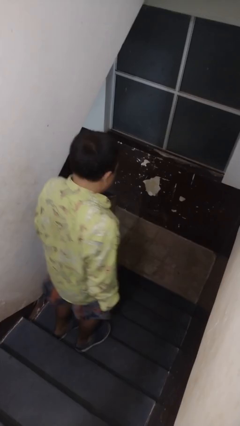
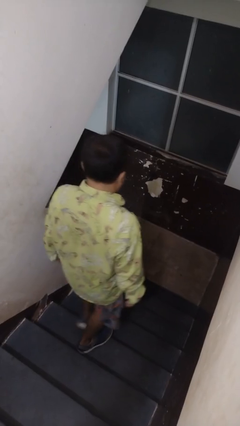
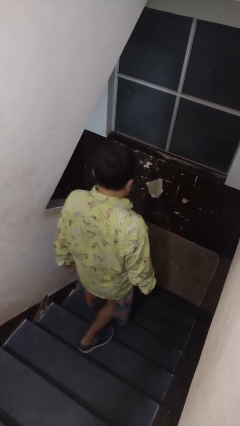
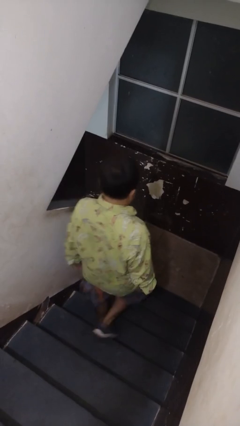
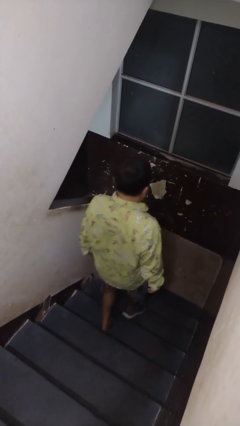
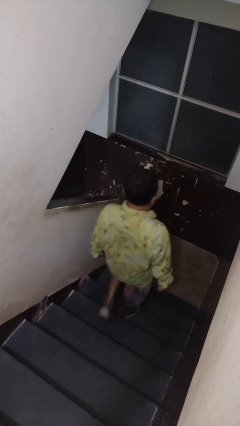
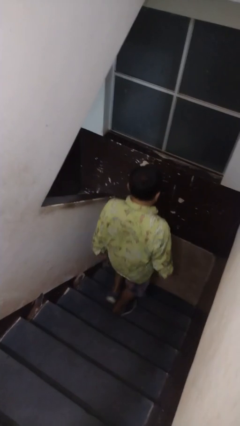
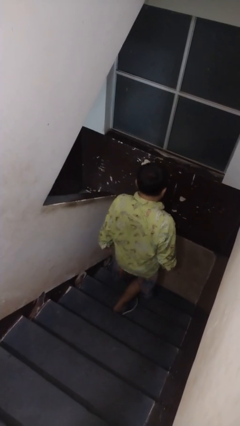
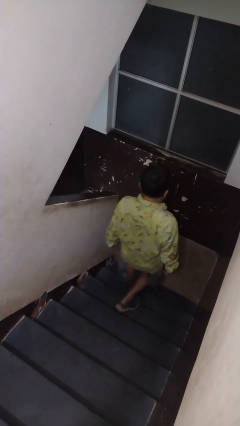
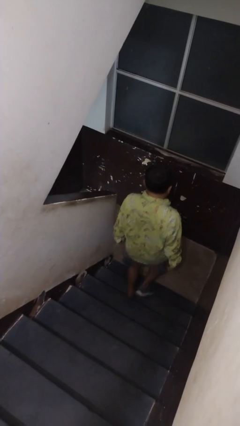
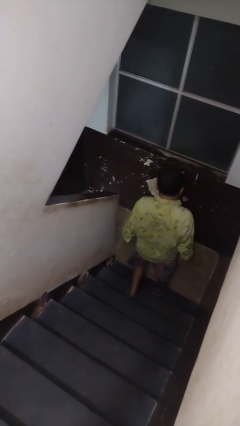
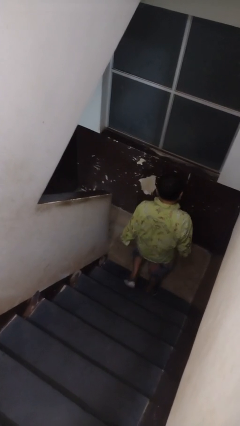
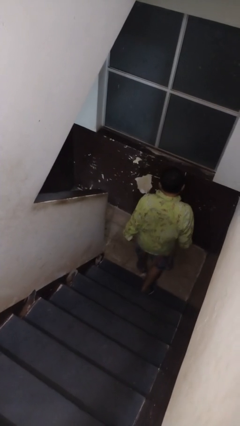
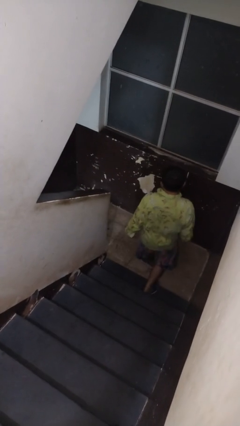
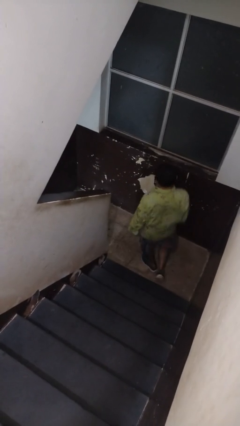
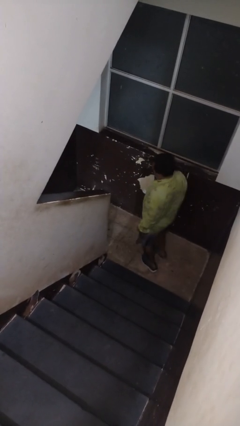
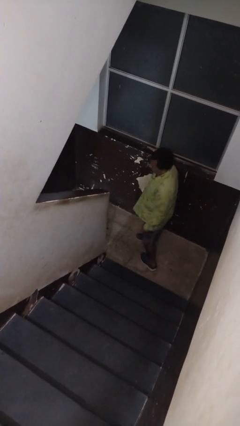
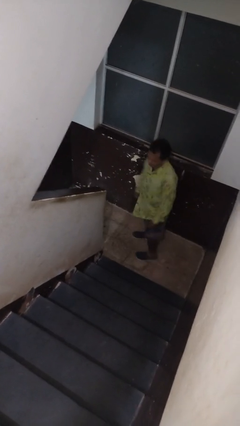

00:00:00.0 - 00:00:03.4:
person climbs down stairs

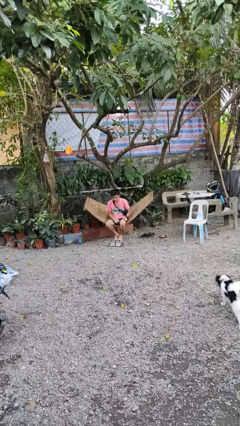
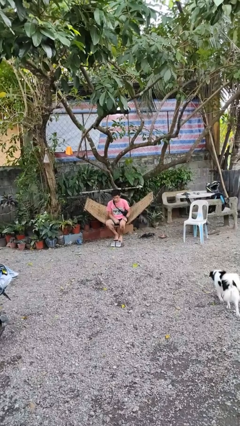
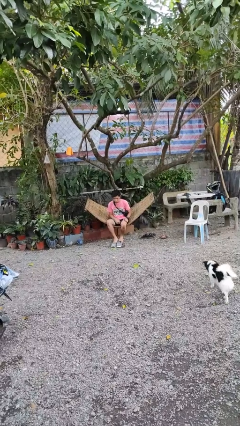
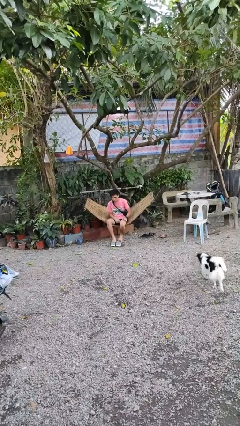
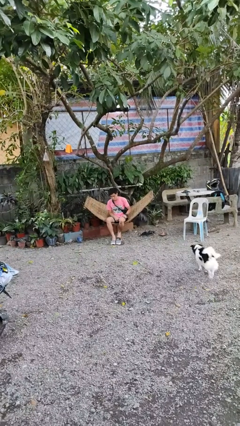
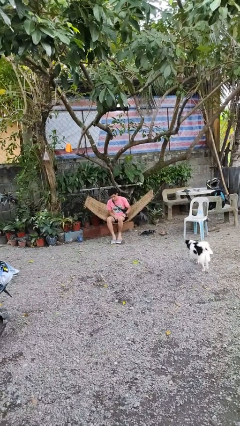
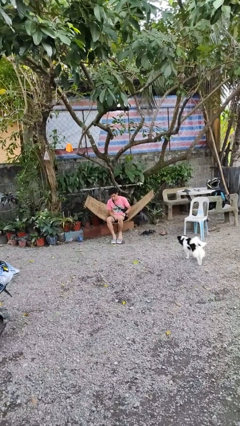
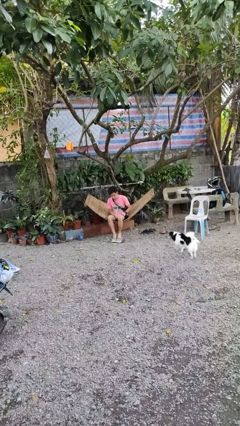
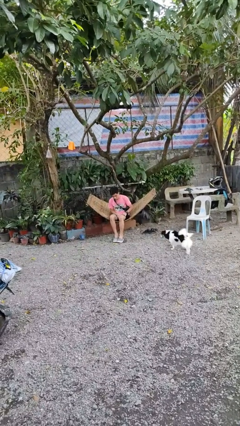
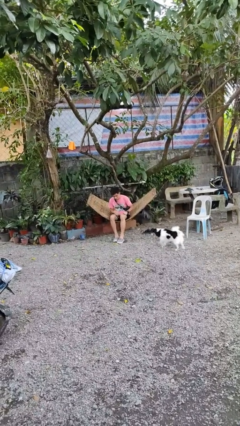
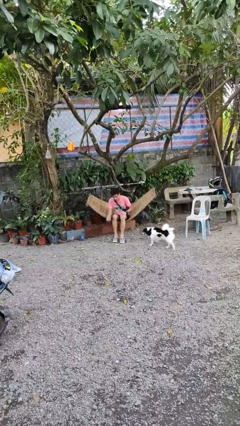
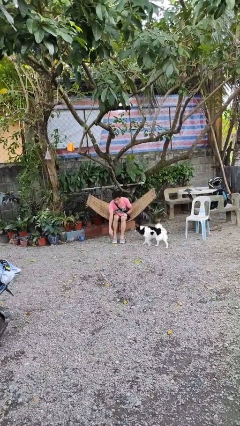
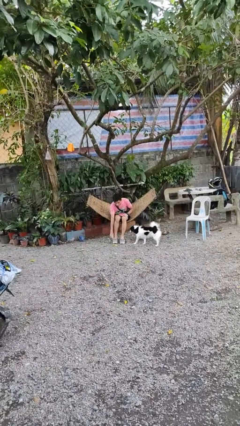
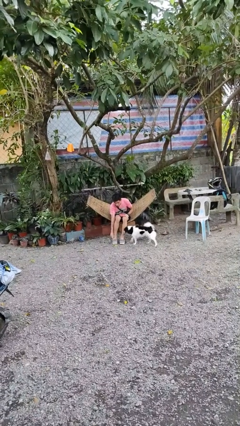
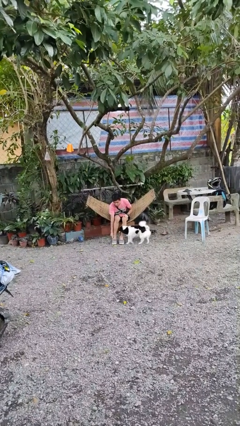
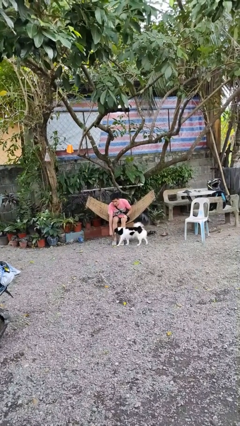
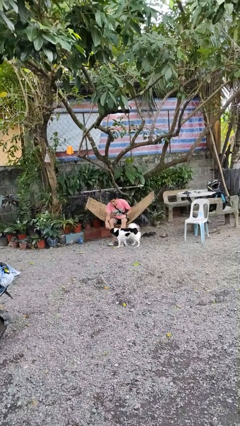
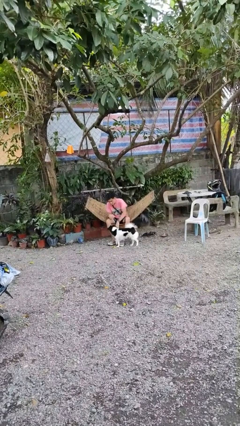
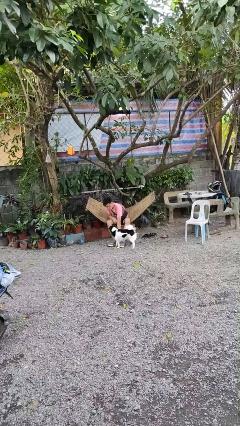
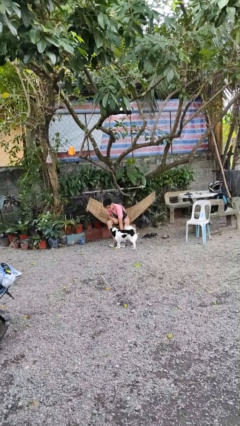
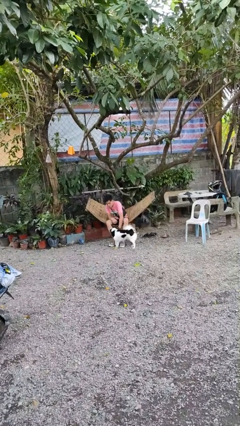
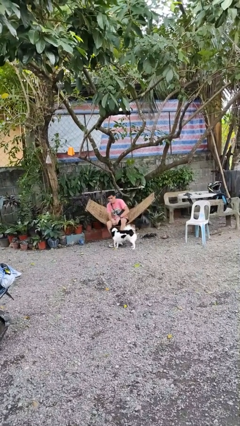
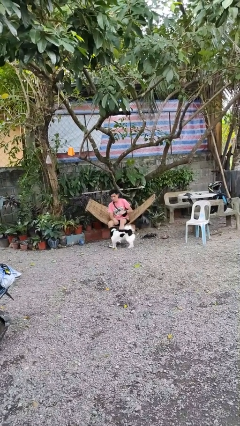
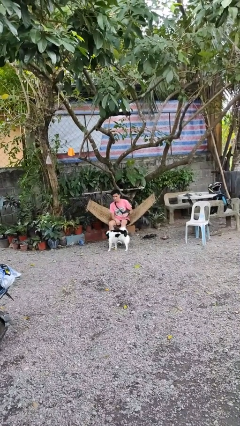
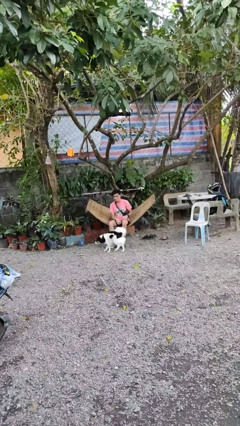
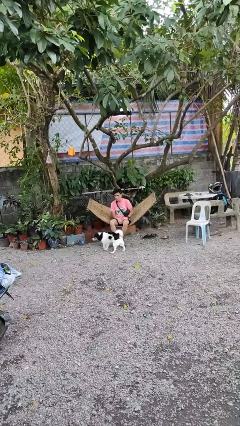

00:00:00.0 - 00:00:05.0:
person puts on shoes

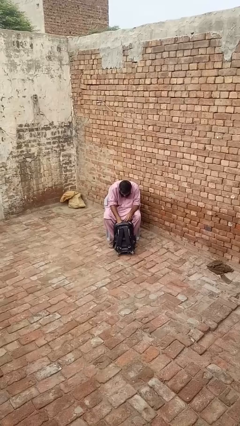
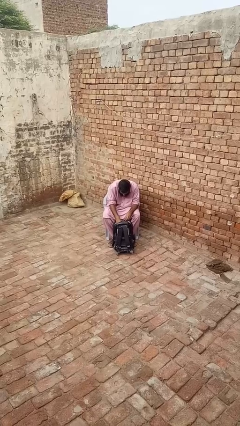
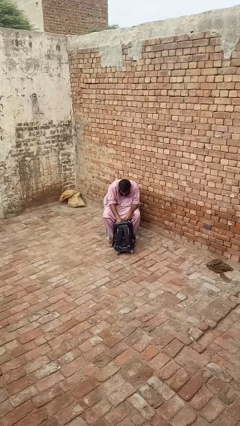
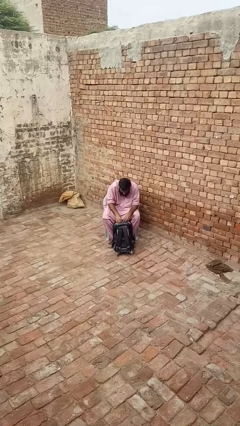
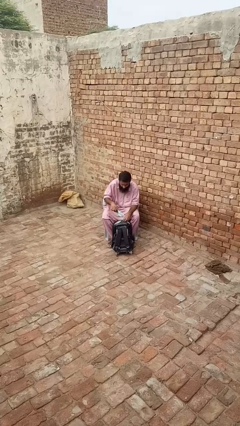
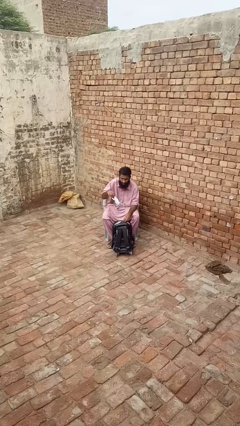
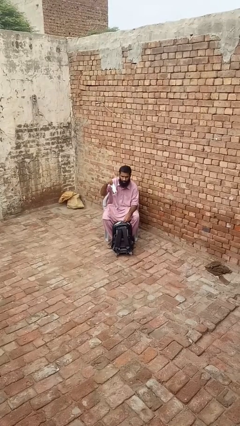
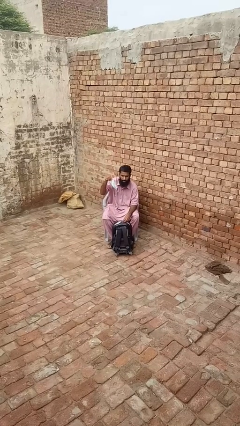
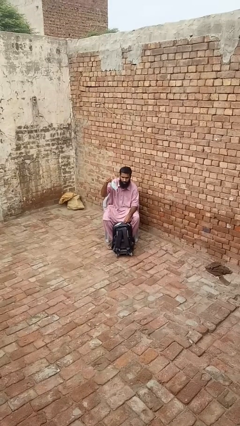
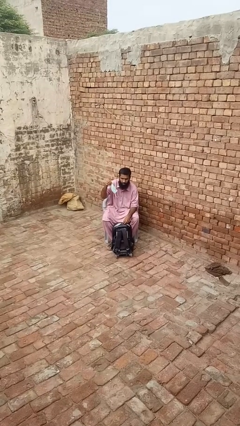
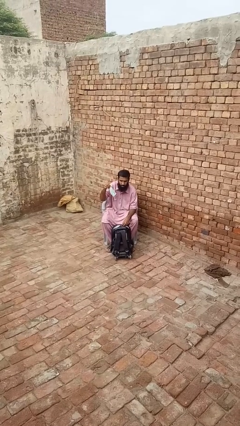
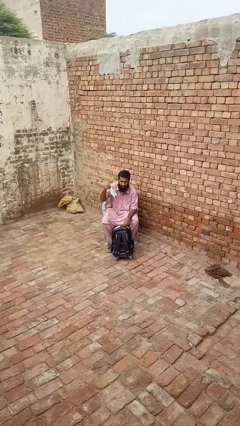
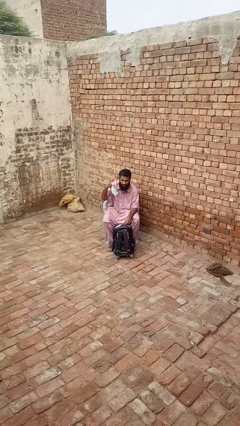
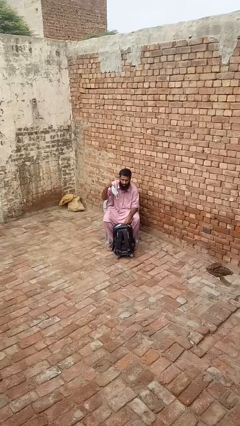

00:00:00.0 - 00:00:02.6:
person takes object from backpack

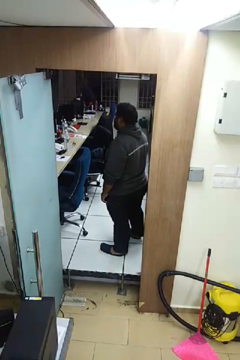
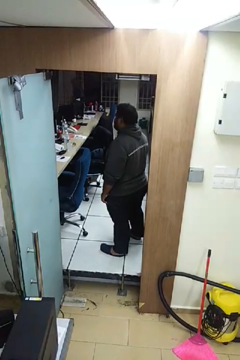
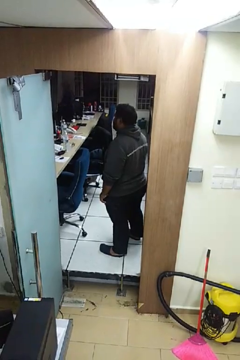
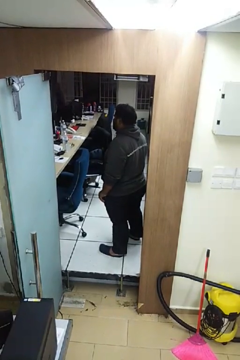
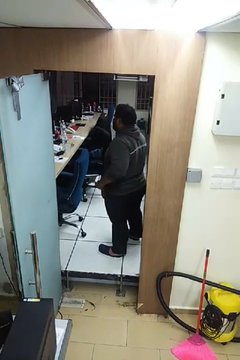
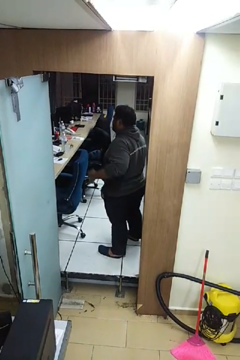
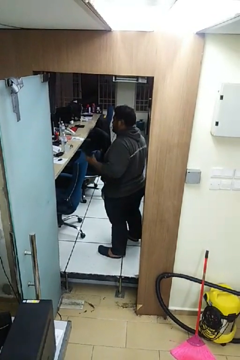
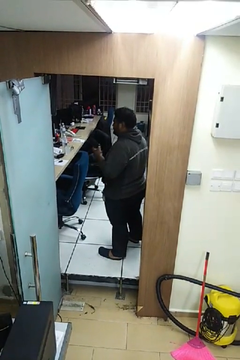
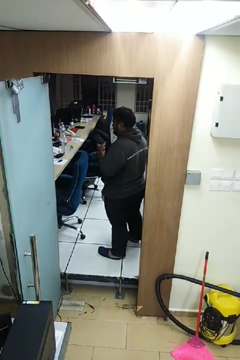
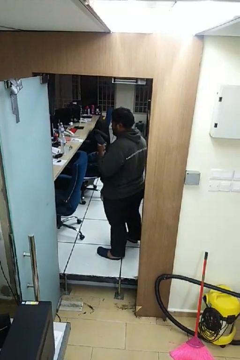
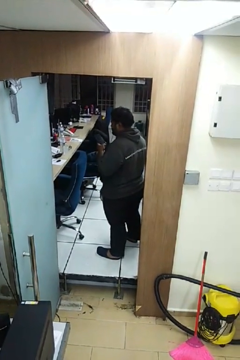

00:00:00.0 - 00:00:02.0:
person takes phone from pocket

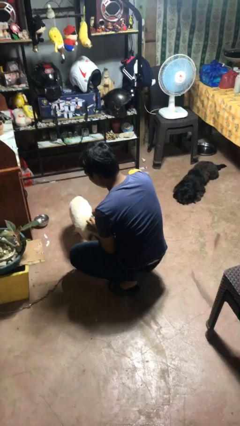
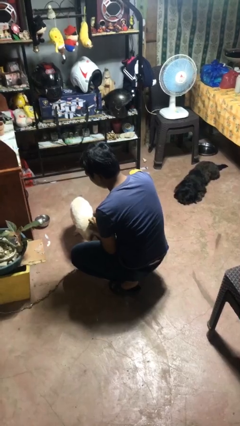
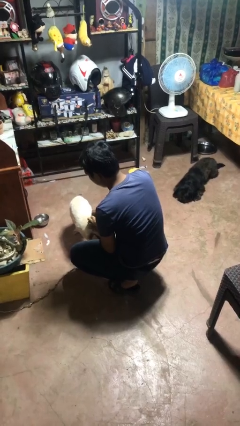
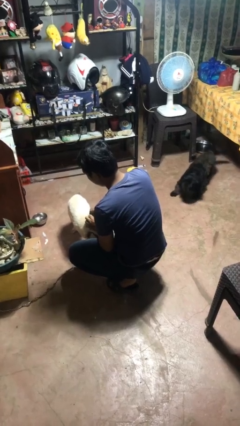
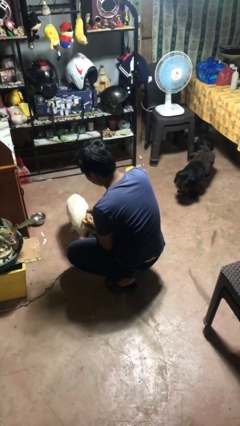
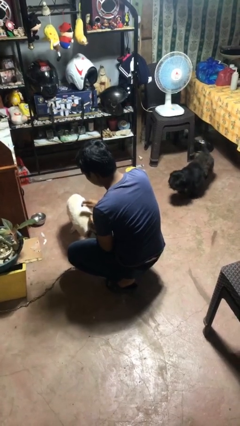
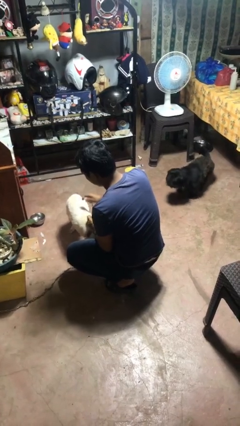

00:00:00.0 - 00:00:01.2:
person unattaches leash from dog

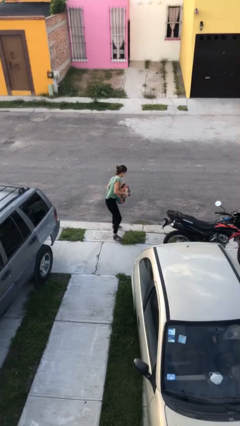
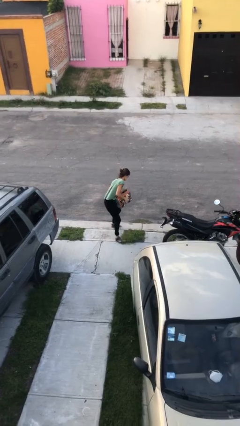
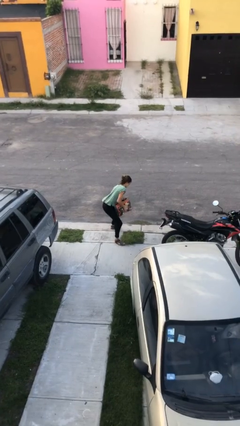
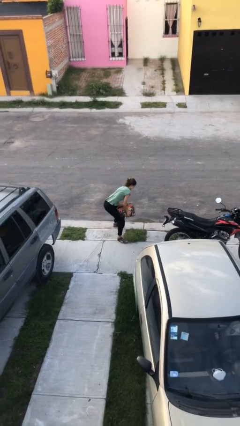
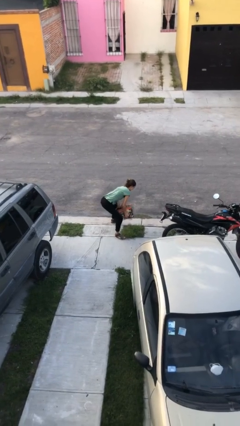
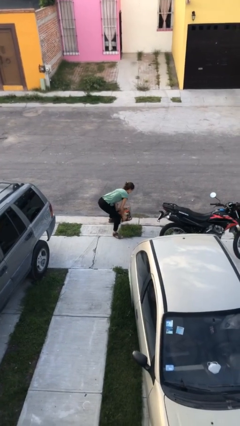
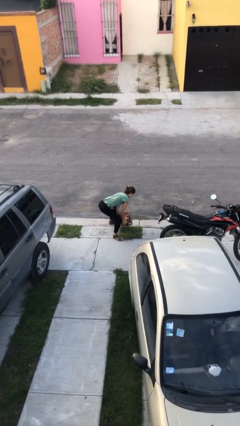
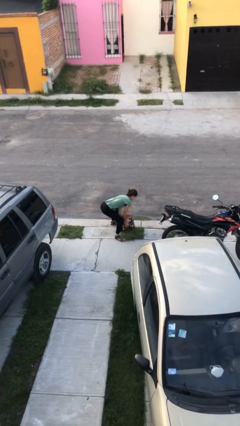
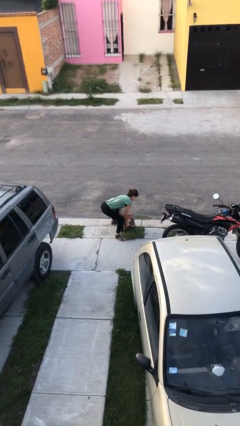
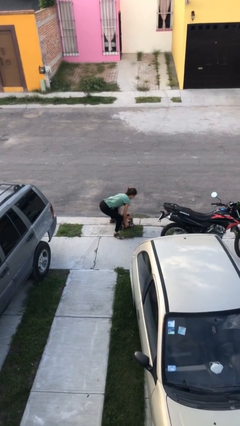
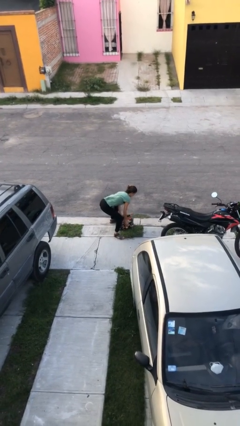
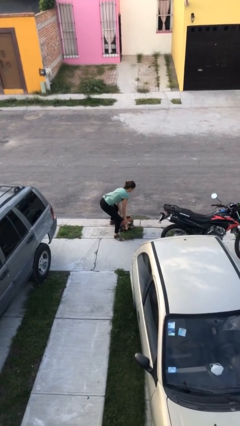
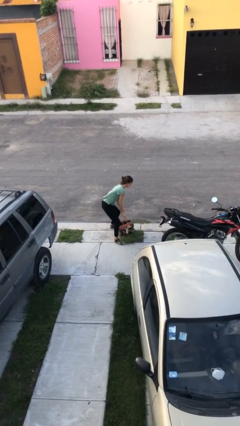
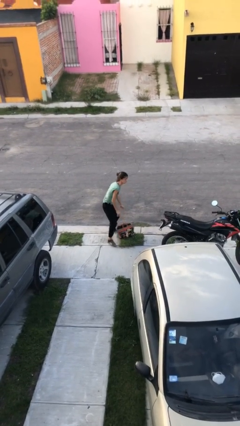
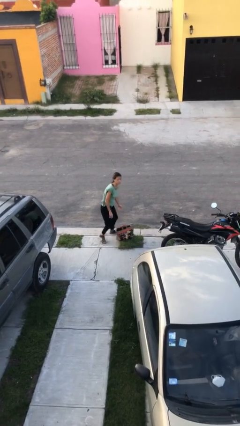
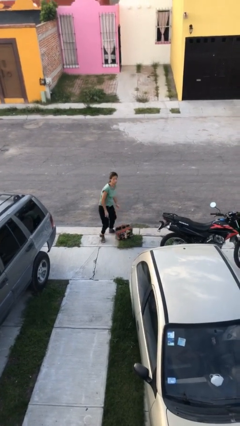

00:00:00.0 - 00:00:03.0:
person puts down object on floor
